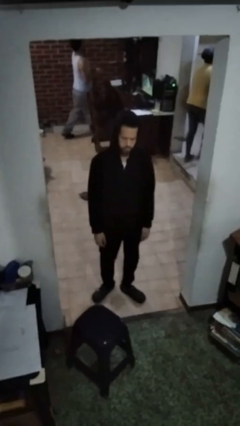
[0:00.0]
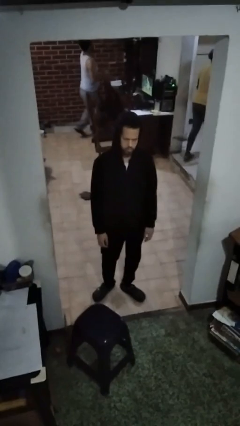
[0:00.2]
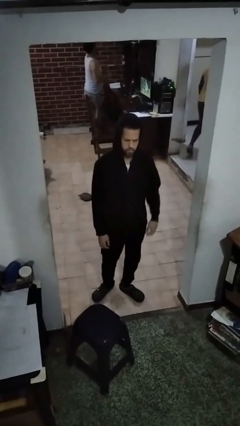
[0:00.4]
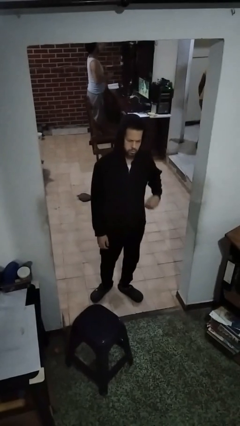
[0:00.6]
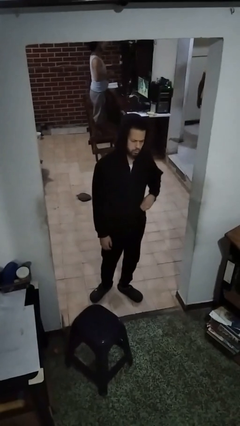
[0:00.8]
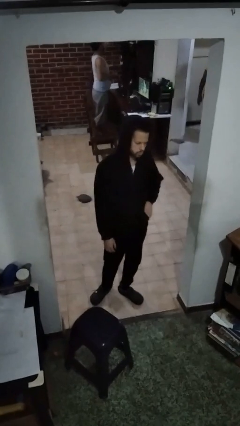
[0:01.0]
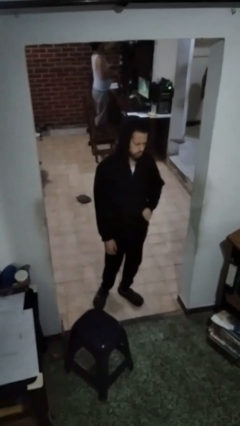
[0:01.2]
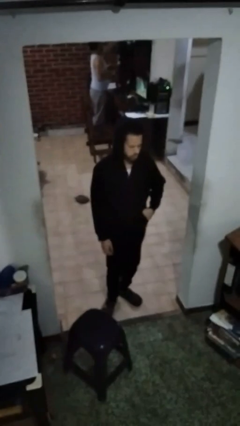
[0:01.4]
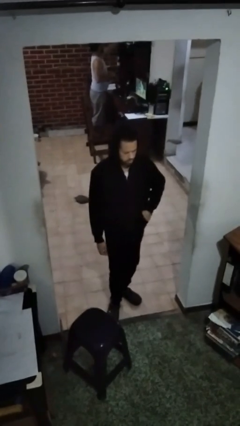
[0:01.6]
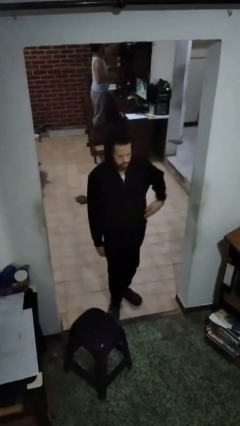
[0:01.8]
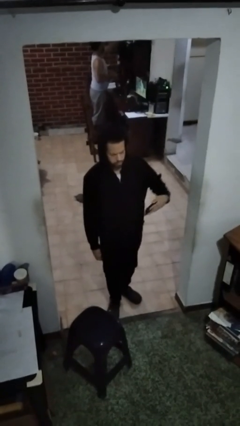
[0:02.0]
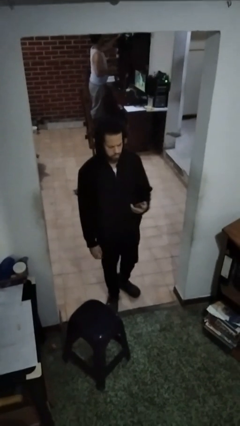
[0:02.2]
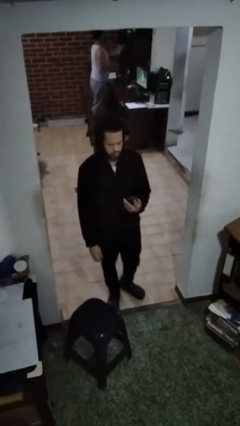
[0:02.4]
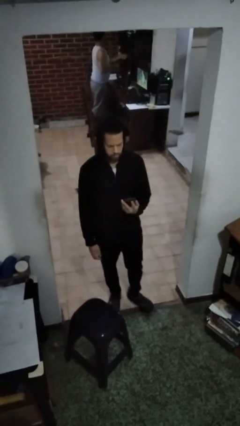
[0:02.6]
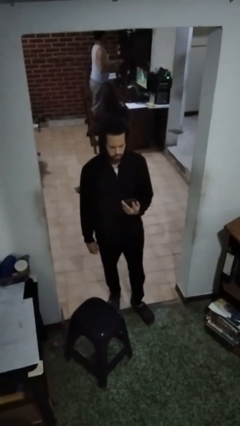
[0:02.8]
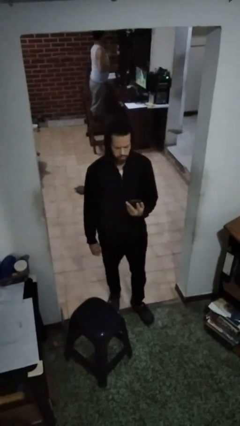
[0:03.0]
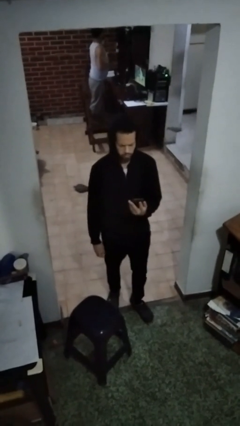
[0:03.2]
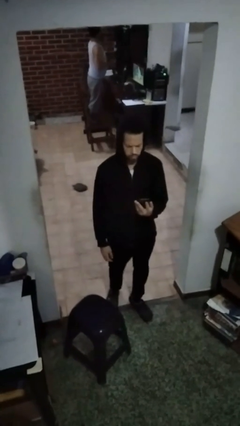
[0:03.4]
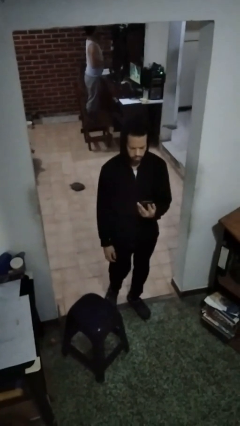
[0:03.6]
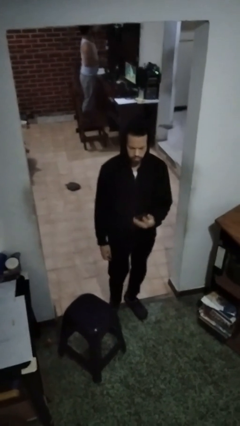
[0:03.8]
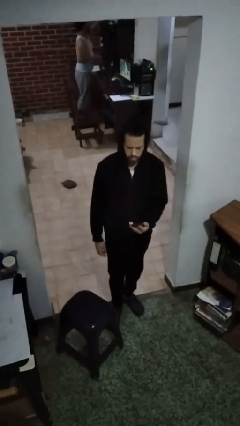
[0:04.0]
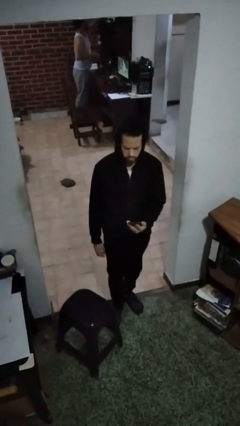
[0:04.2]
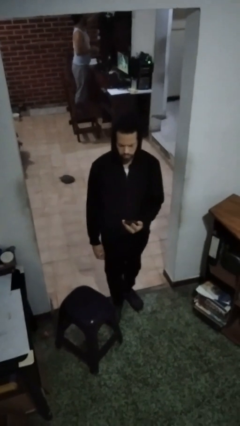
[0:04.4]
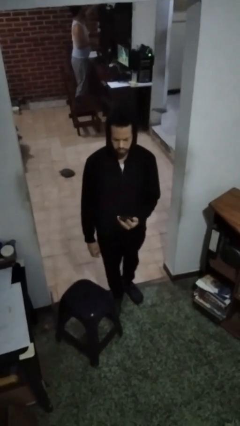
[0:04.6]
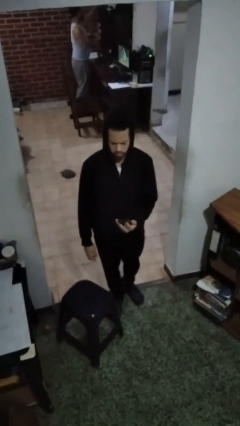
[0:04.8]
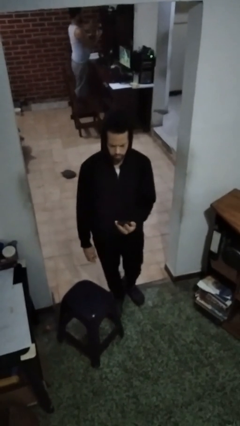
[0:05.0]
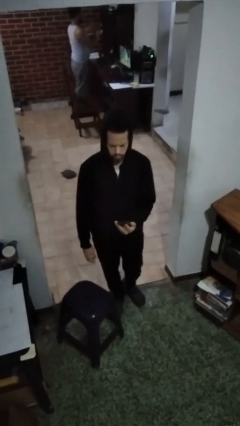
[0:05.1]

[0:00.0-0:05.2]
person takes phone from pocket

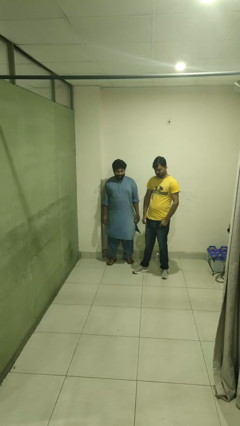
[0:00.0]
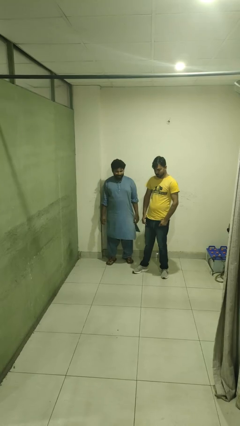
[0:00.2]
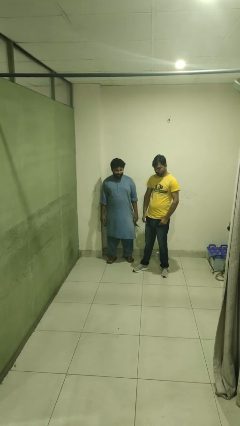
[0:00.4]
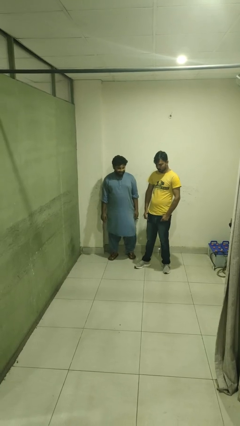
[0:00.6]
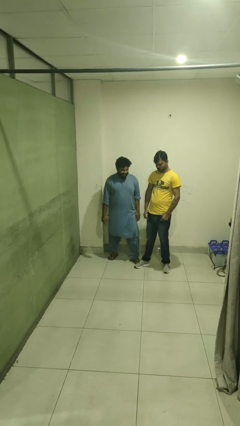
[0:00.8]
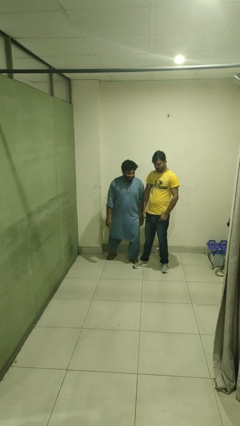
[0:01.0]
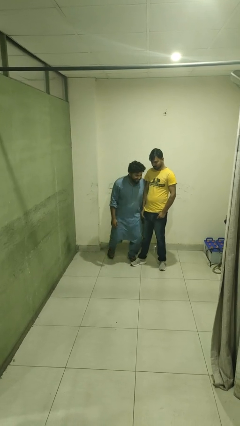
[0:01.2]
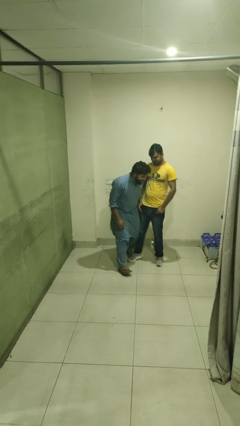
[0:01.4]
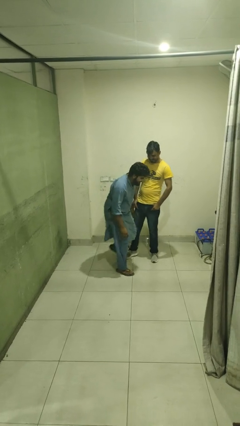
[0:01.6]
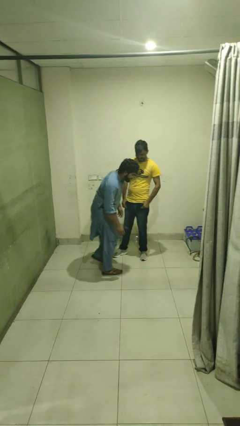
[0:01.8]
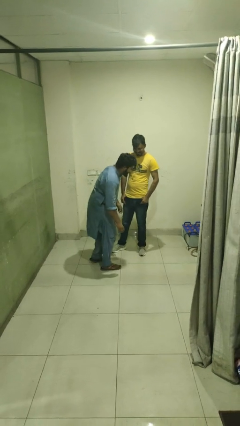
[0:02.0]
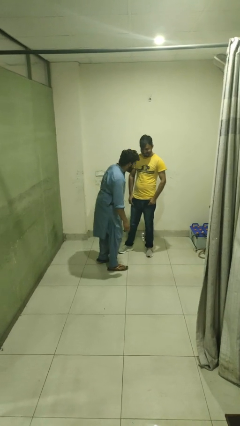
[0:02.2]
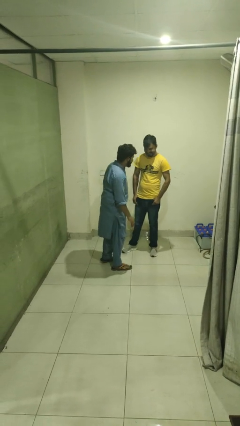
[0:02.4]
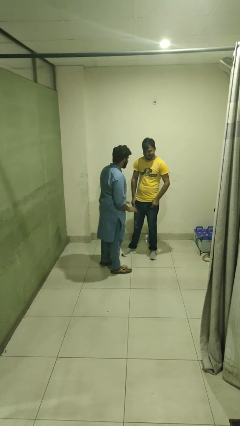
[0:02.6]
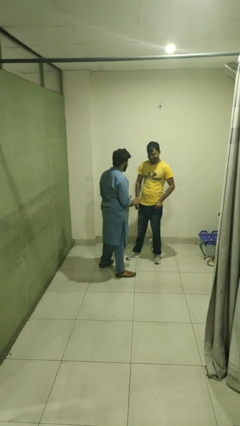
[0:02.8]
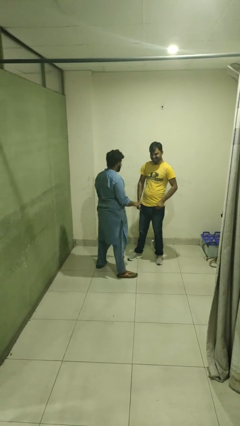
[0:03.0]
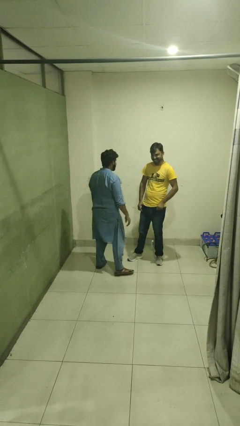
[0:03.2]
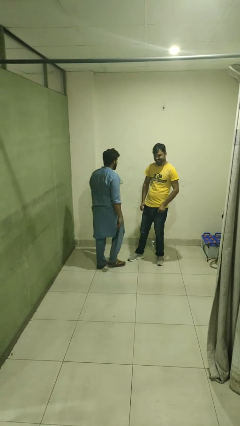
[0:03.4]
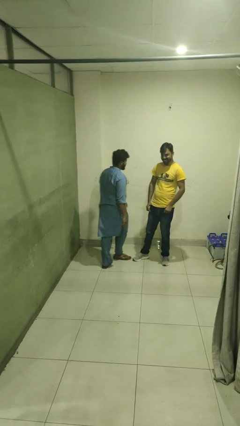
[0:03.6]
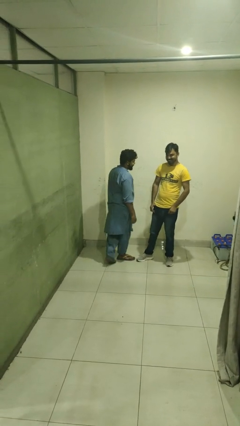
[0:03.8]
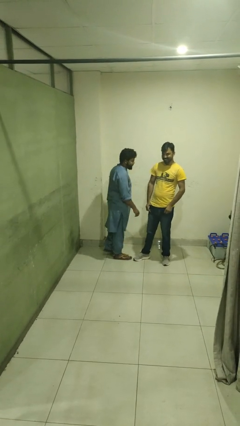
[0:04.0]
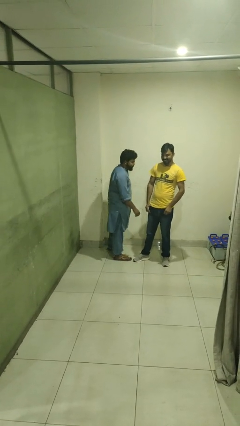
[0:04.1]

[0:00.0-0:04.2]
person bumps into person

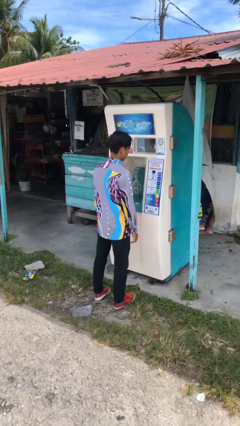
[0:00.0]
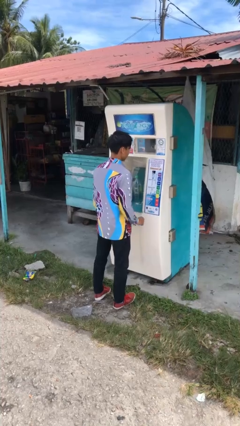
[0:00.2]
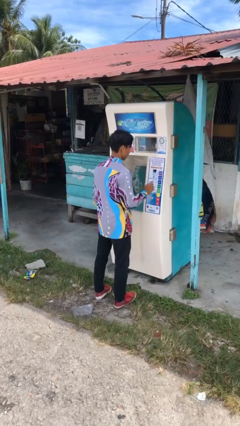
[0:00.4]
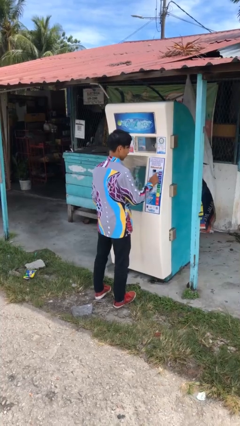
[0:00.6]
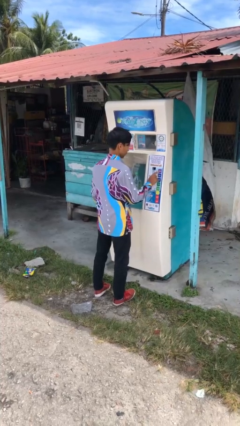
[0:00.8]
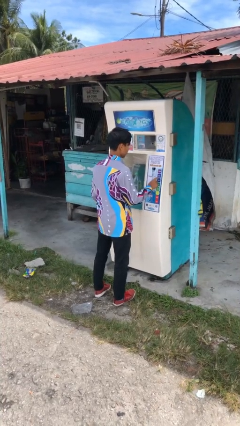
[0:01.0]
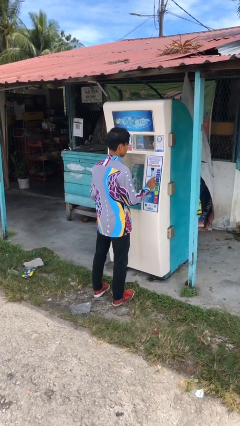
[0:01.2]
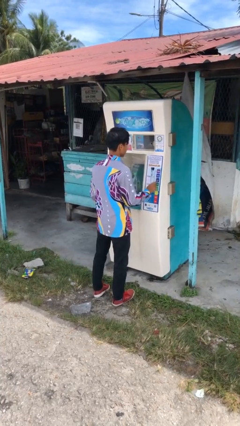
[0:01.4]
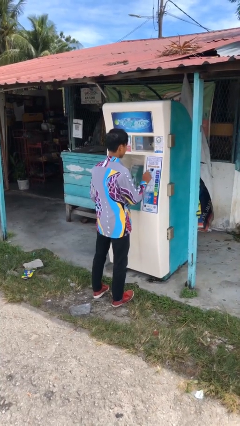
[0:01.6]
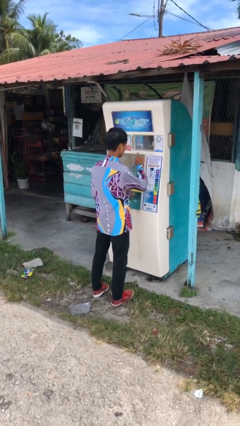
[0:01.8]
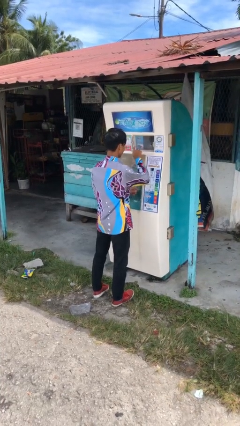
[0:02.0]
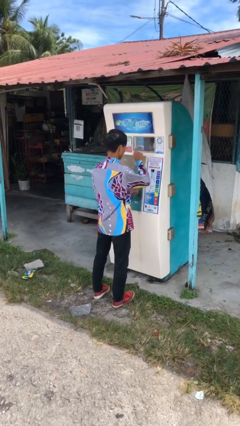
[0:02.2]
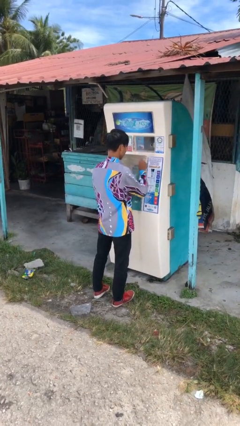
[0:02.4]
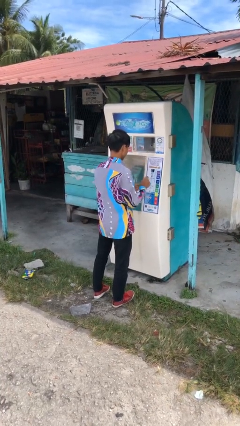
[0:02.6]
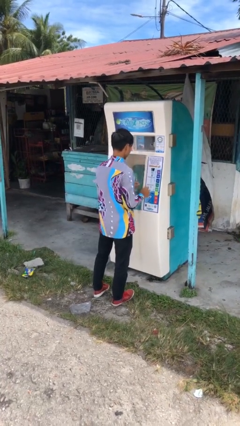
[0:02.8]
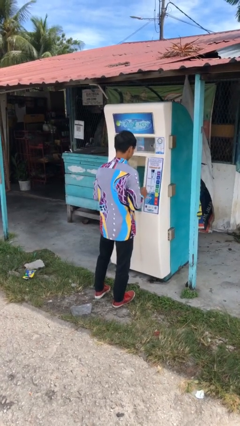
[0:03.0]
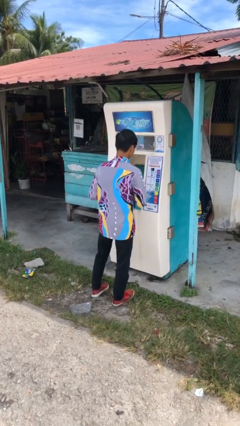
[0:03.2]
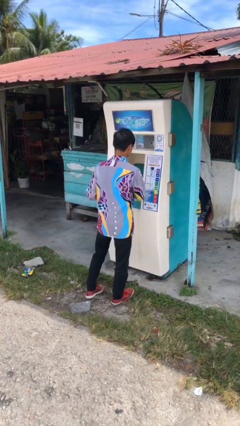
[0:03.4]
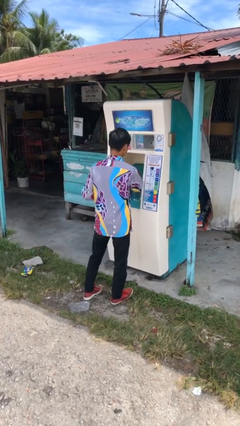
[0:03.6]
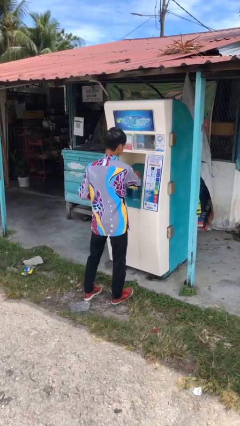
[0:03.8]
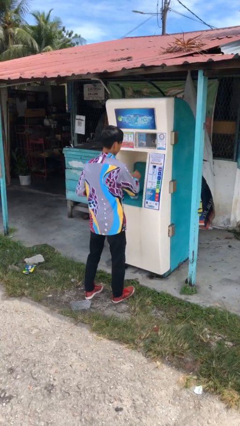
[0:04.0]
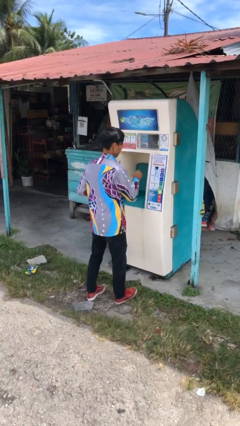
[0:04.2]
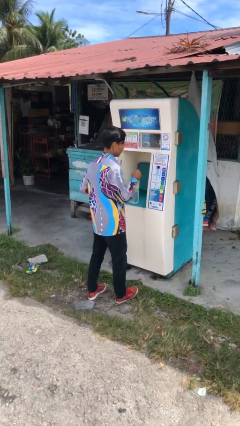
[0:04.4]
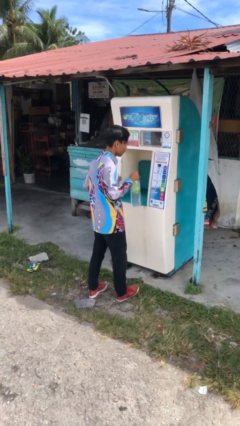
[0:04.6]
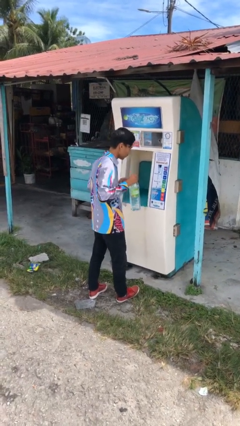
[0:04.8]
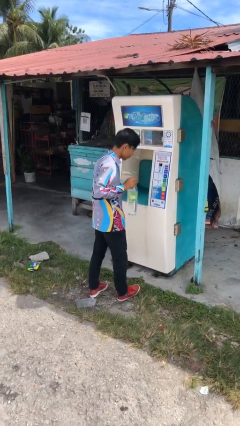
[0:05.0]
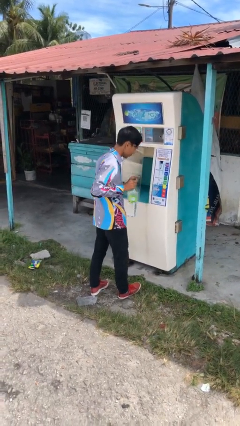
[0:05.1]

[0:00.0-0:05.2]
person purchases from machine

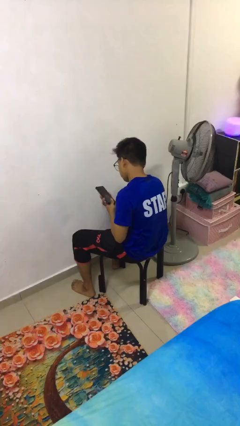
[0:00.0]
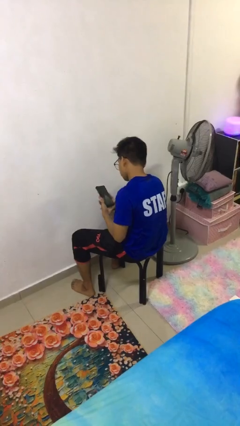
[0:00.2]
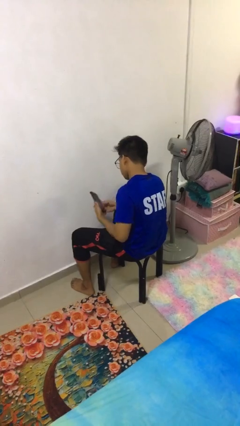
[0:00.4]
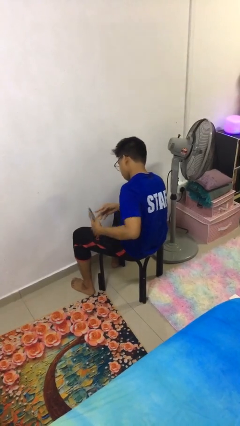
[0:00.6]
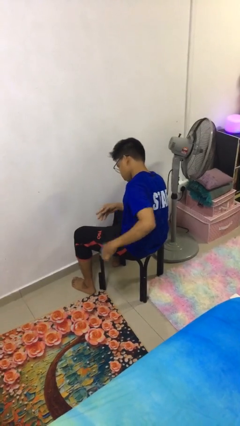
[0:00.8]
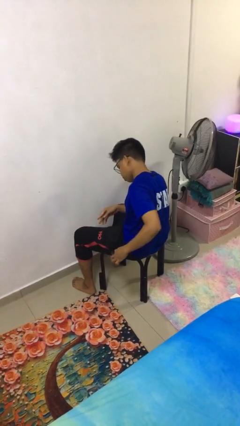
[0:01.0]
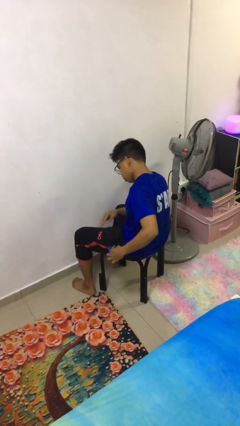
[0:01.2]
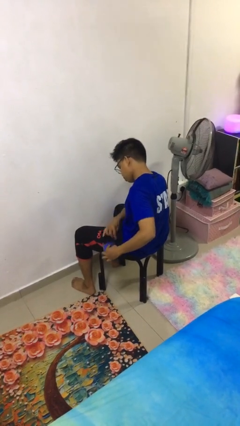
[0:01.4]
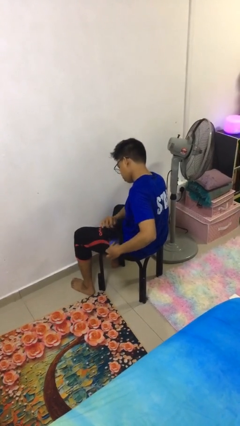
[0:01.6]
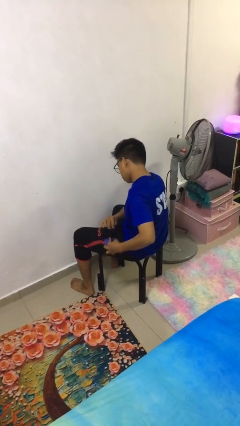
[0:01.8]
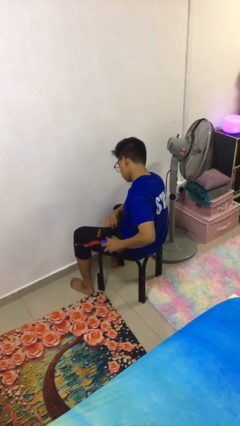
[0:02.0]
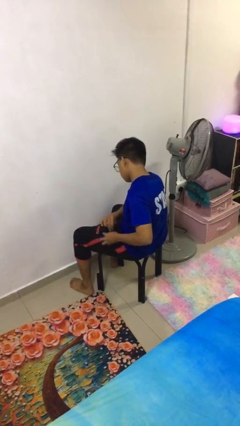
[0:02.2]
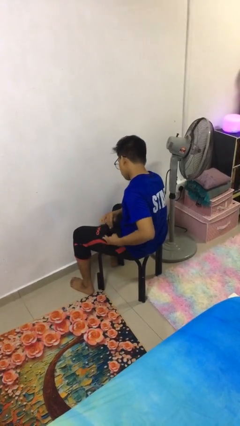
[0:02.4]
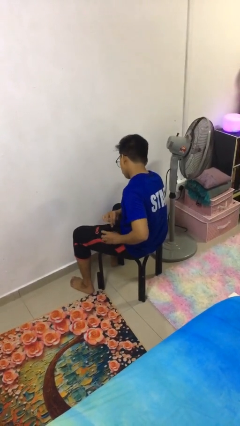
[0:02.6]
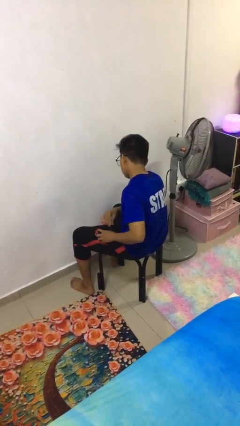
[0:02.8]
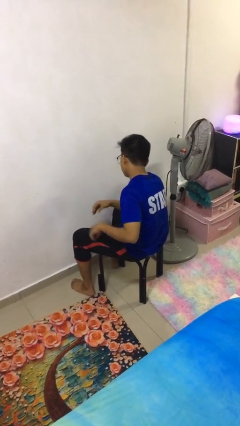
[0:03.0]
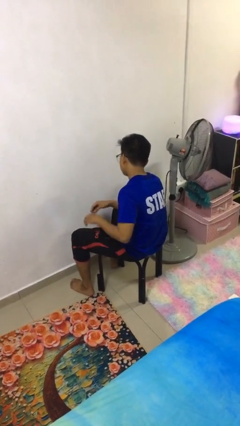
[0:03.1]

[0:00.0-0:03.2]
person puts phone into pocket

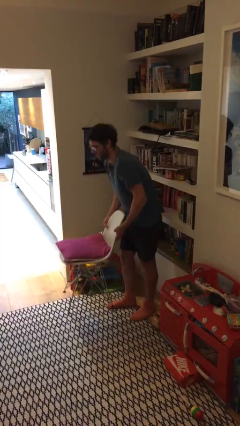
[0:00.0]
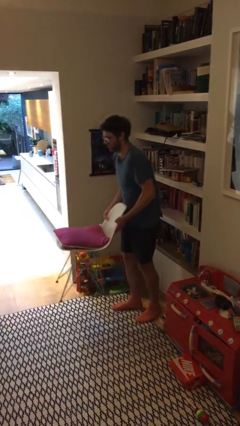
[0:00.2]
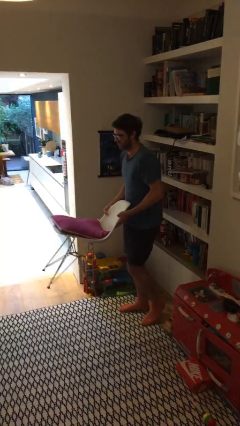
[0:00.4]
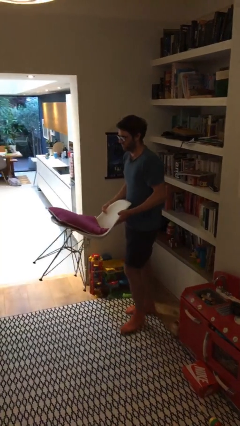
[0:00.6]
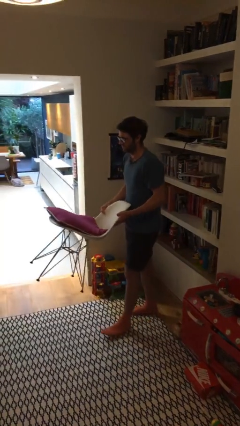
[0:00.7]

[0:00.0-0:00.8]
person picks up object from floor
